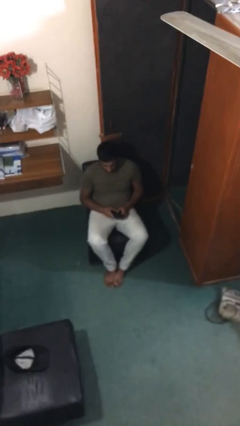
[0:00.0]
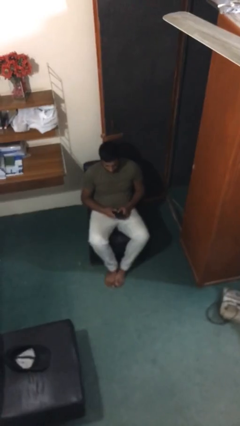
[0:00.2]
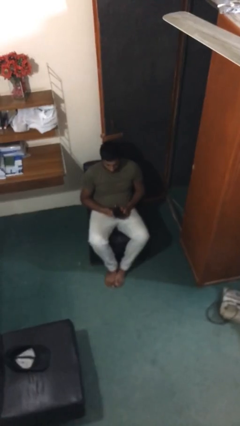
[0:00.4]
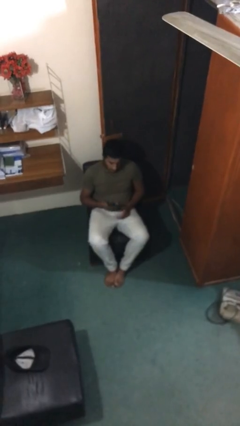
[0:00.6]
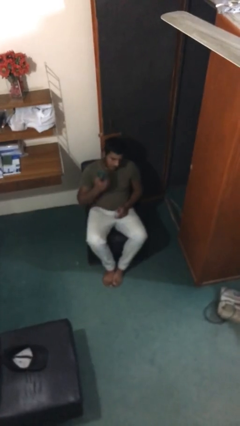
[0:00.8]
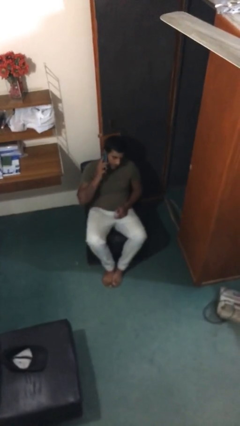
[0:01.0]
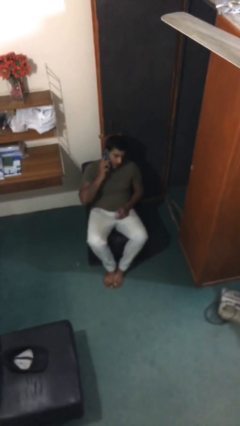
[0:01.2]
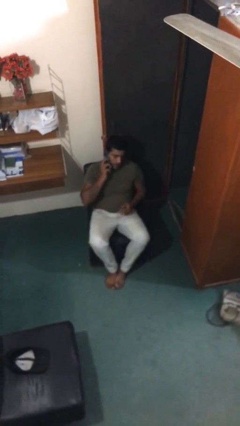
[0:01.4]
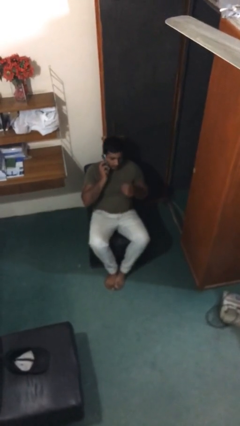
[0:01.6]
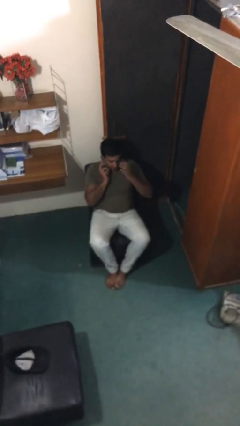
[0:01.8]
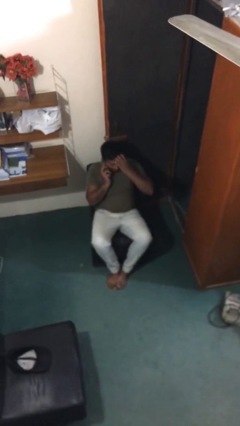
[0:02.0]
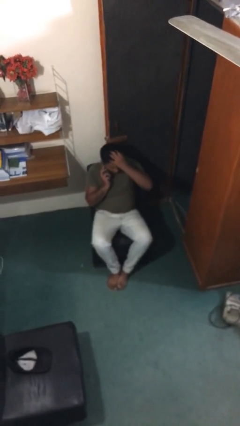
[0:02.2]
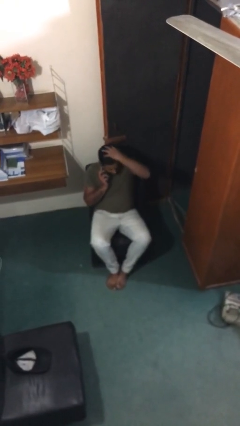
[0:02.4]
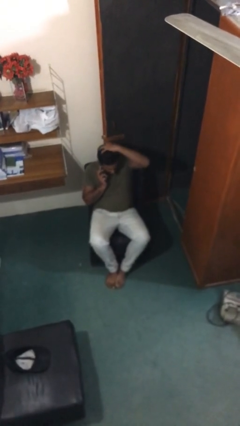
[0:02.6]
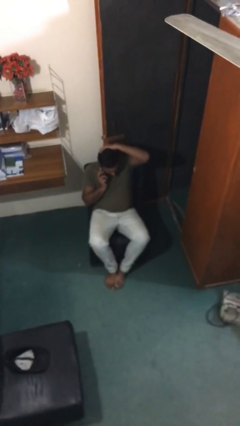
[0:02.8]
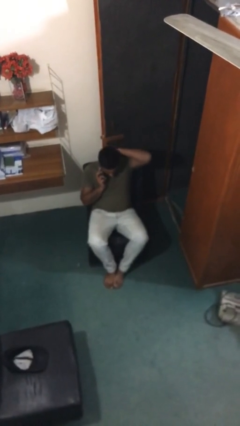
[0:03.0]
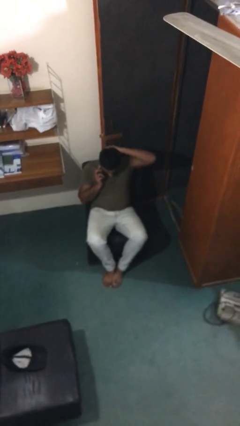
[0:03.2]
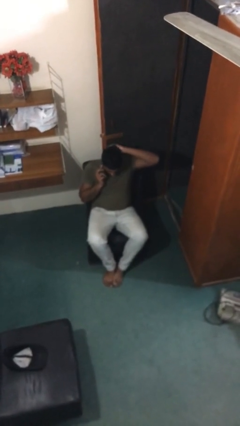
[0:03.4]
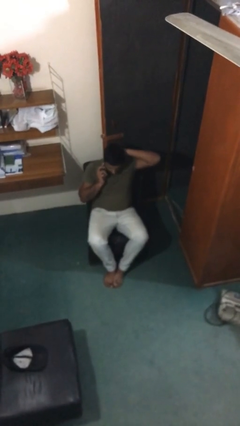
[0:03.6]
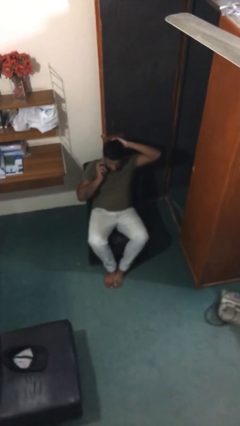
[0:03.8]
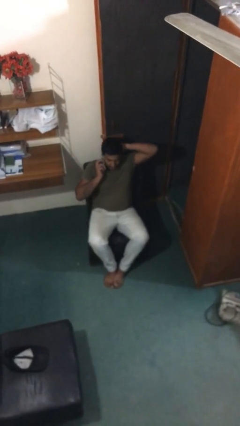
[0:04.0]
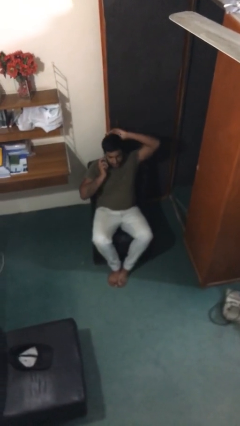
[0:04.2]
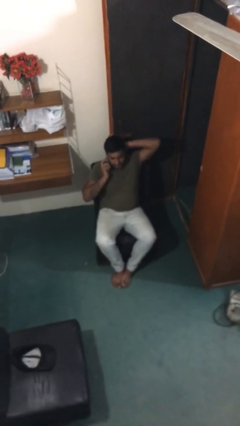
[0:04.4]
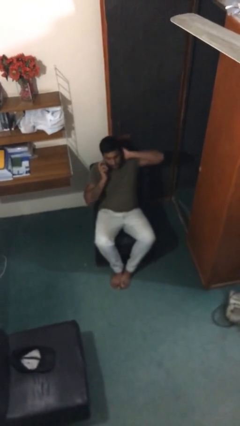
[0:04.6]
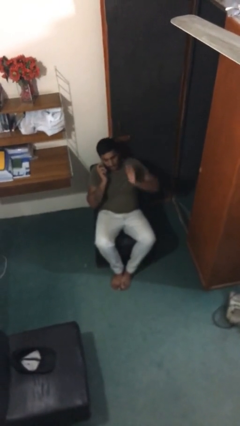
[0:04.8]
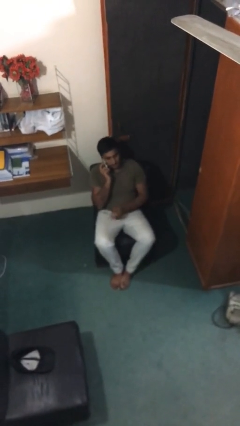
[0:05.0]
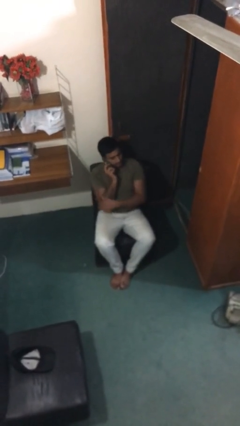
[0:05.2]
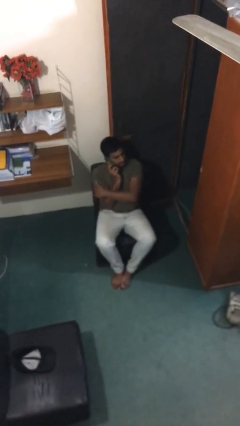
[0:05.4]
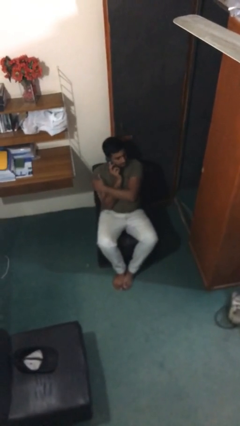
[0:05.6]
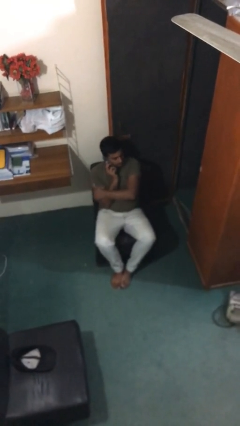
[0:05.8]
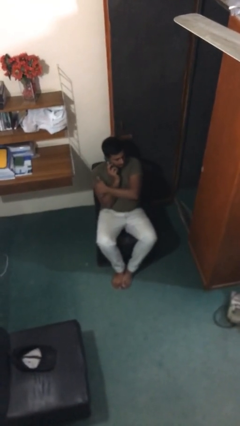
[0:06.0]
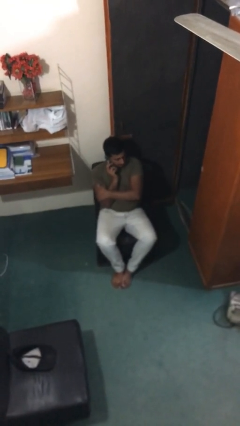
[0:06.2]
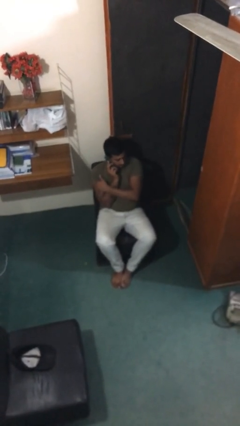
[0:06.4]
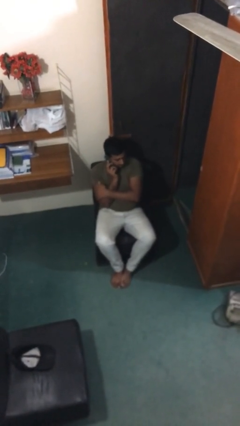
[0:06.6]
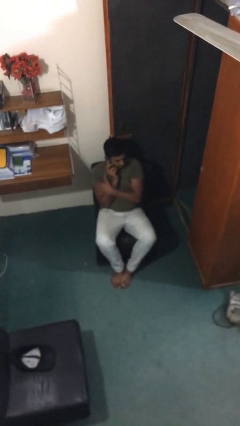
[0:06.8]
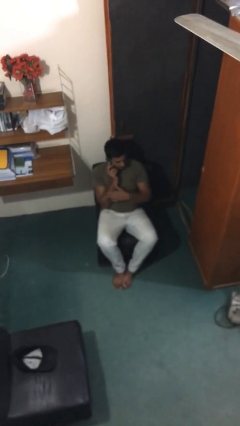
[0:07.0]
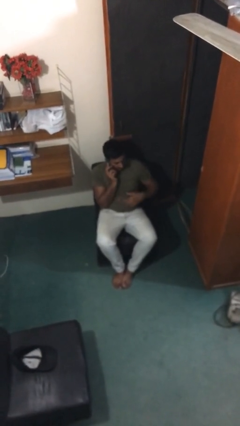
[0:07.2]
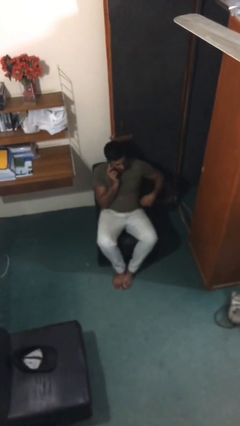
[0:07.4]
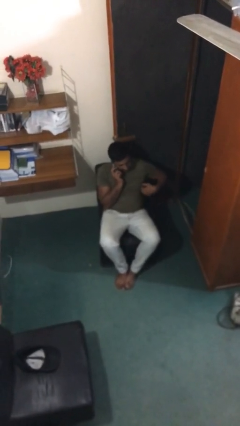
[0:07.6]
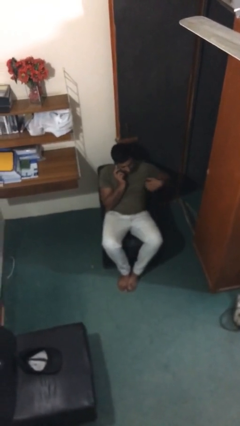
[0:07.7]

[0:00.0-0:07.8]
person talks on phone

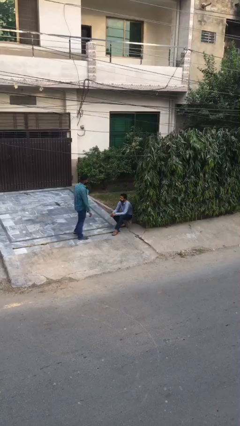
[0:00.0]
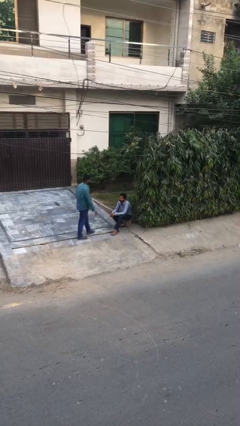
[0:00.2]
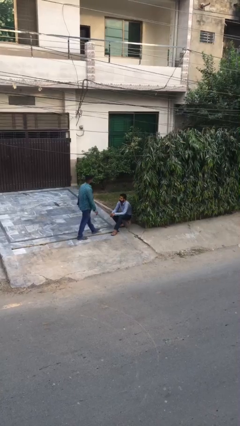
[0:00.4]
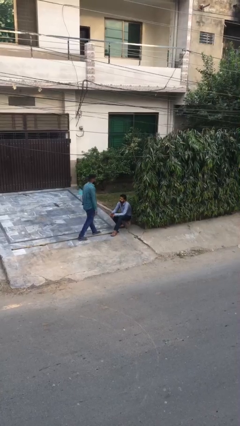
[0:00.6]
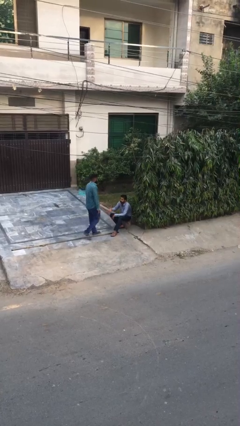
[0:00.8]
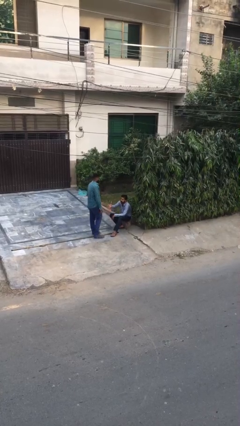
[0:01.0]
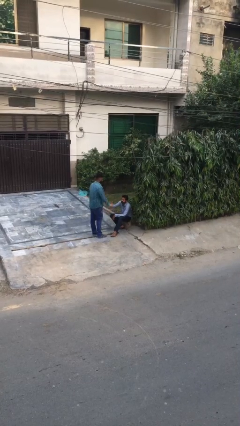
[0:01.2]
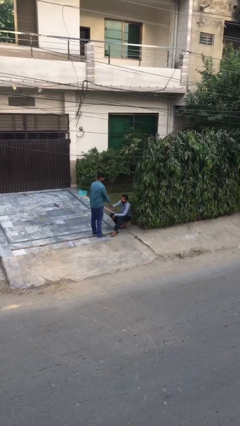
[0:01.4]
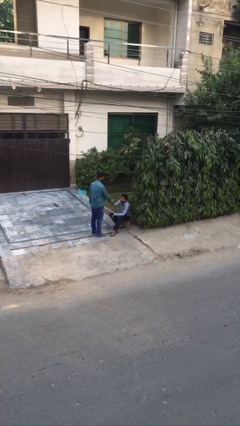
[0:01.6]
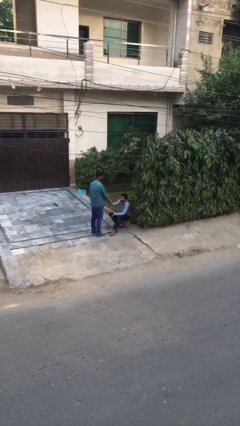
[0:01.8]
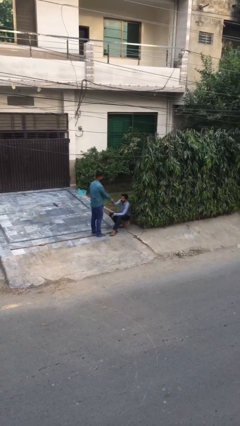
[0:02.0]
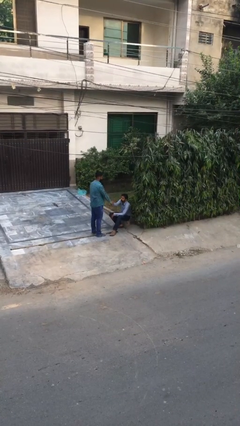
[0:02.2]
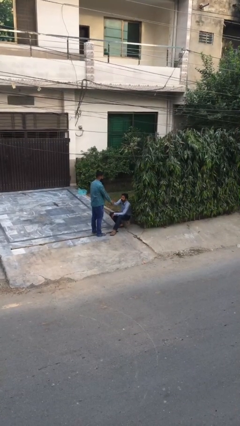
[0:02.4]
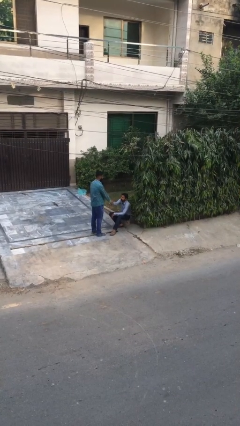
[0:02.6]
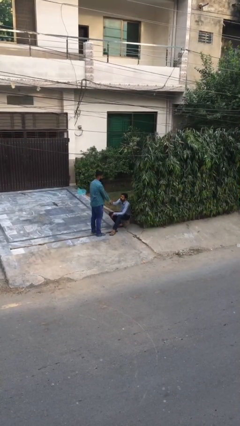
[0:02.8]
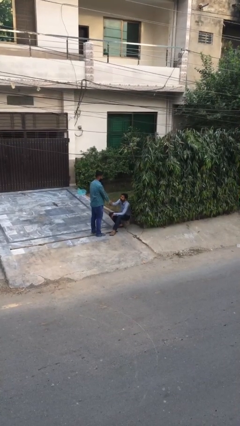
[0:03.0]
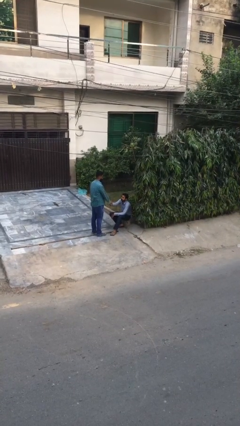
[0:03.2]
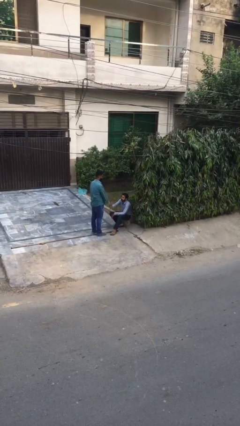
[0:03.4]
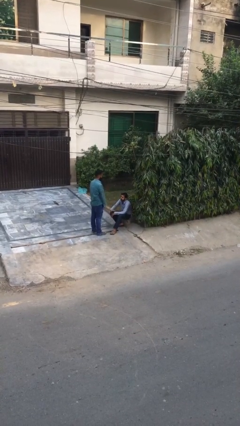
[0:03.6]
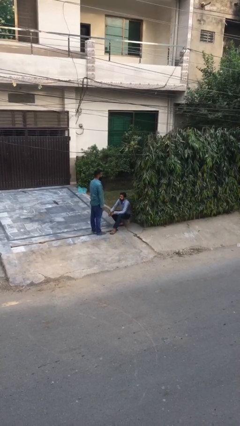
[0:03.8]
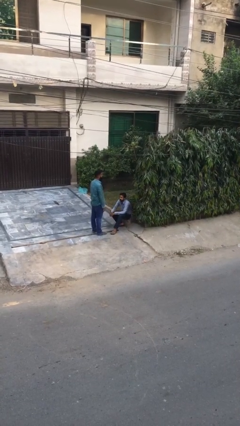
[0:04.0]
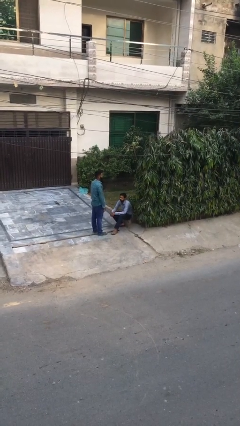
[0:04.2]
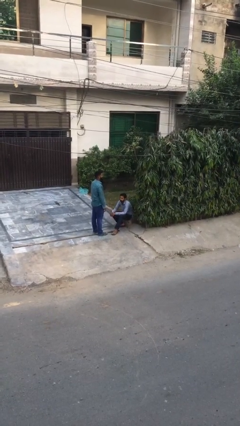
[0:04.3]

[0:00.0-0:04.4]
person shakes hand

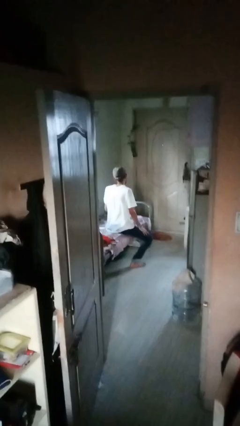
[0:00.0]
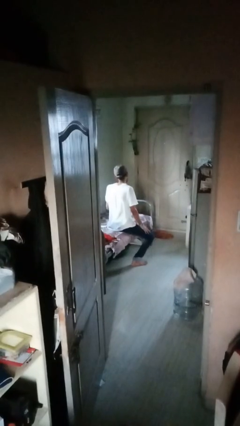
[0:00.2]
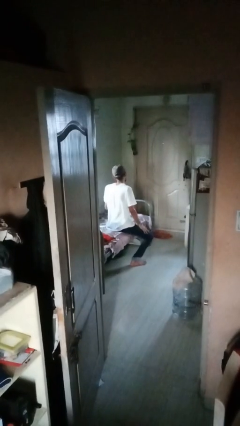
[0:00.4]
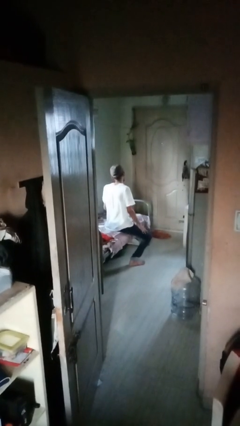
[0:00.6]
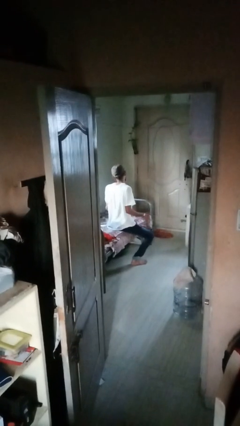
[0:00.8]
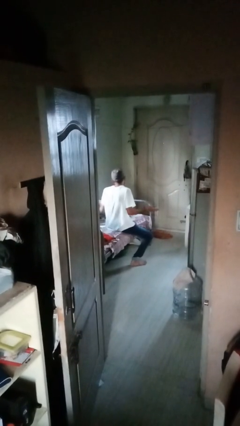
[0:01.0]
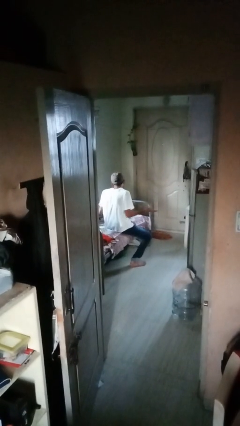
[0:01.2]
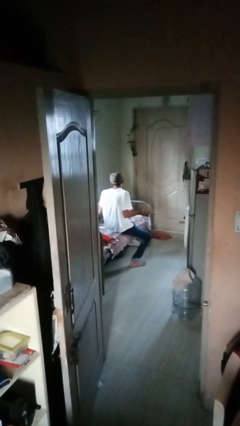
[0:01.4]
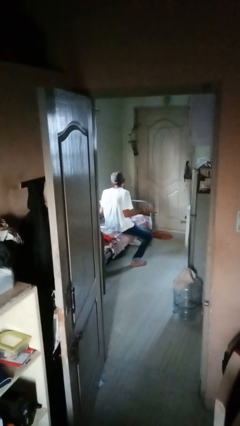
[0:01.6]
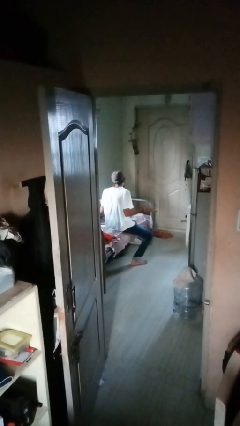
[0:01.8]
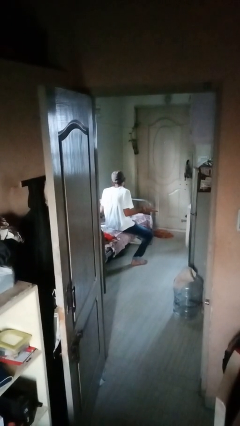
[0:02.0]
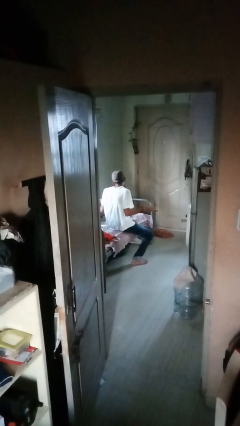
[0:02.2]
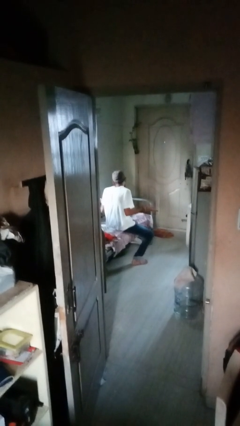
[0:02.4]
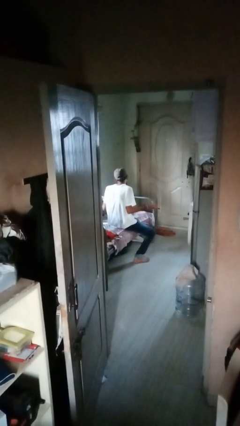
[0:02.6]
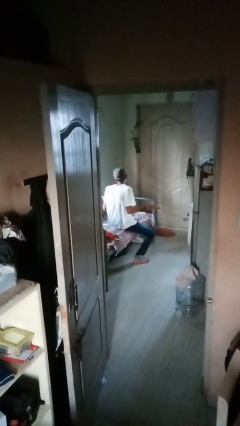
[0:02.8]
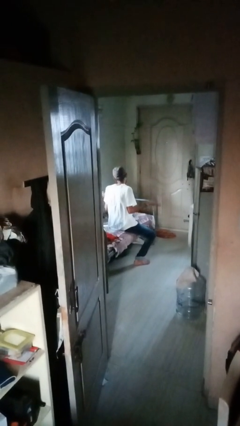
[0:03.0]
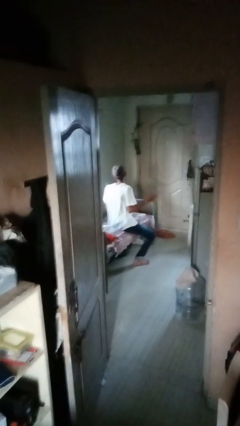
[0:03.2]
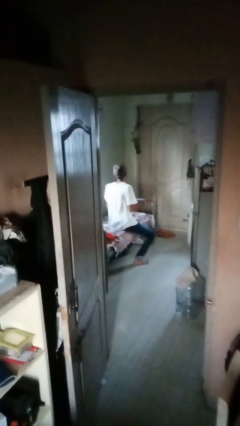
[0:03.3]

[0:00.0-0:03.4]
person shrugs

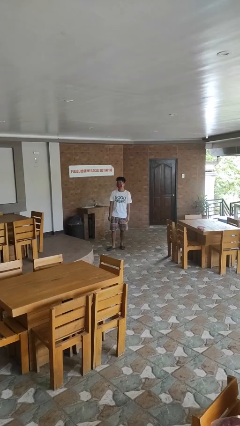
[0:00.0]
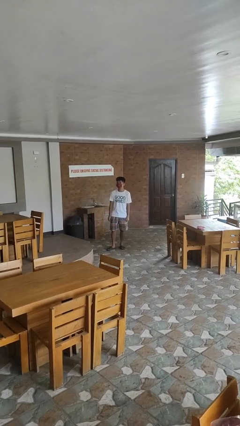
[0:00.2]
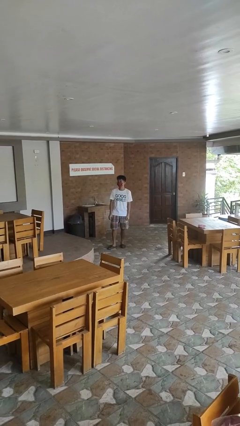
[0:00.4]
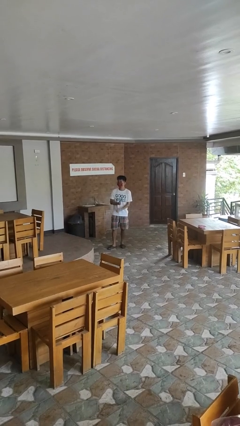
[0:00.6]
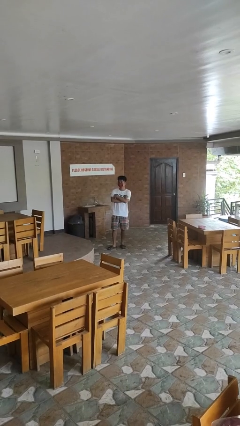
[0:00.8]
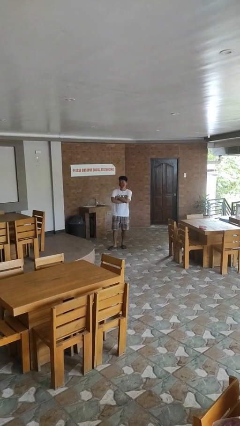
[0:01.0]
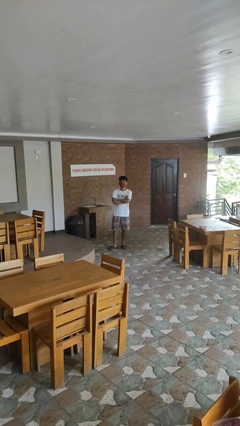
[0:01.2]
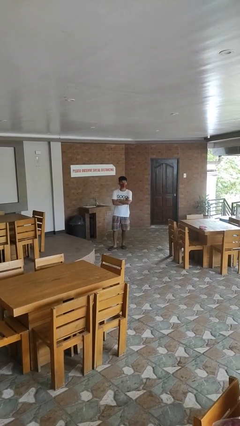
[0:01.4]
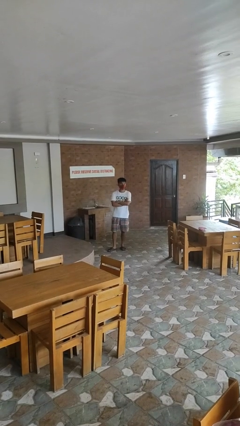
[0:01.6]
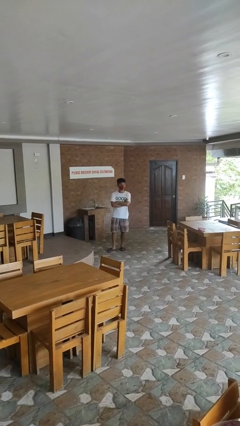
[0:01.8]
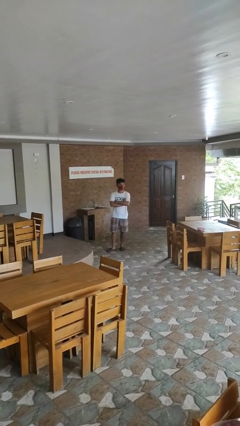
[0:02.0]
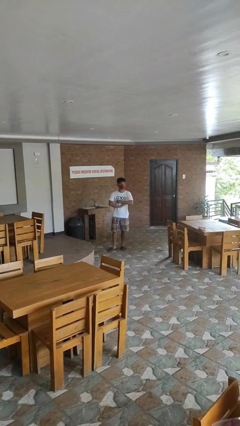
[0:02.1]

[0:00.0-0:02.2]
person brushes teeth
